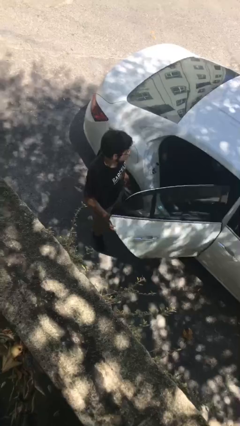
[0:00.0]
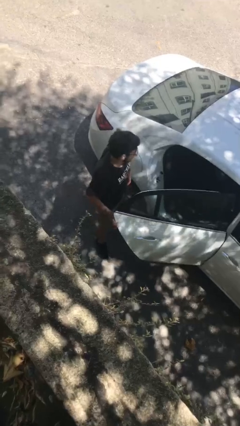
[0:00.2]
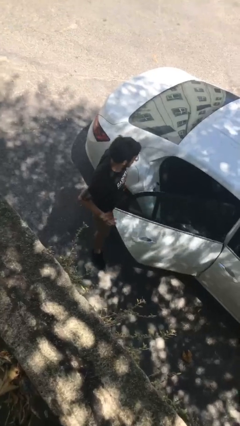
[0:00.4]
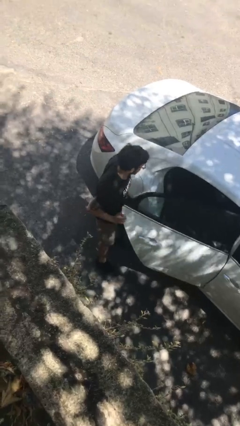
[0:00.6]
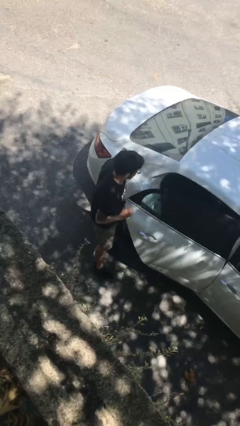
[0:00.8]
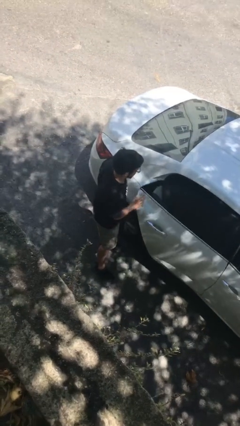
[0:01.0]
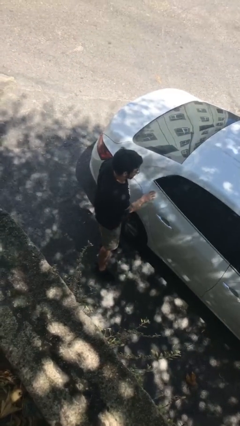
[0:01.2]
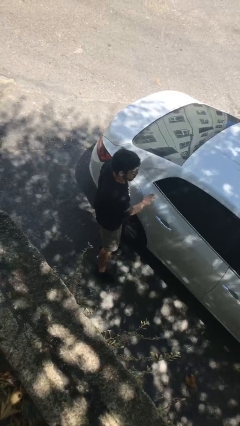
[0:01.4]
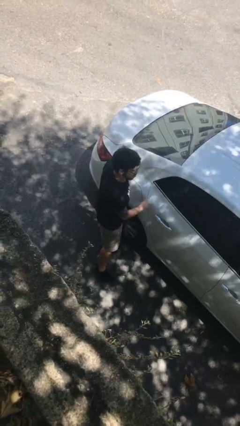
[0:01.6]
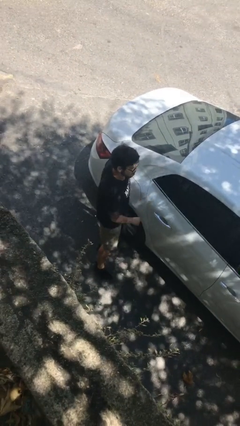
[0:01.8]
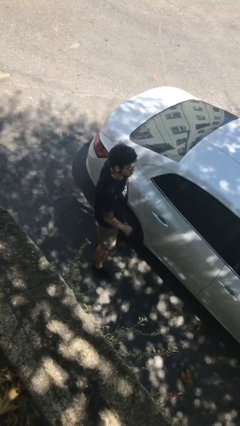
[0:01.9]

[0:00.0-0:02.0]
person closes car door

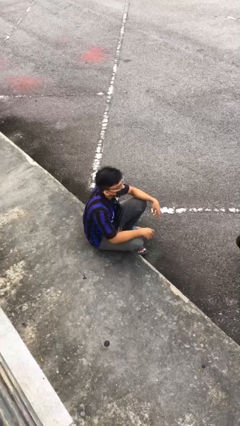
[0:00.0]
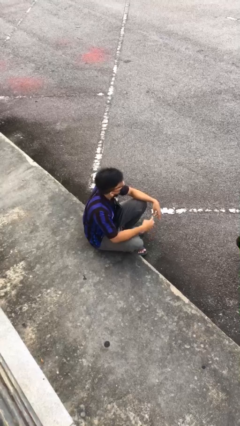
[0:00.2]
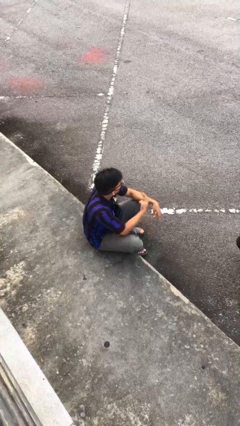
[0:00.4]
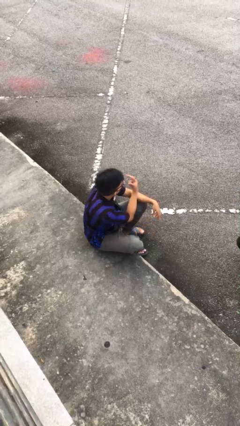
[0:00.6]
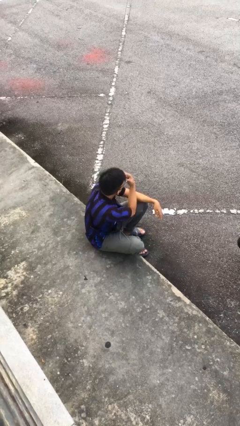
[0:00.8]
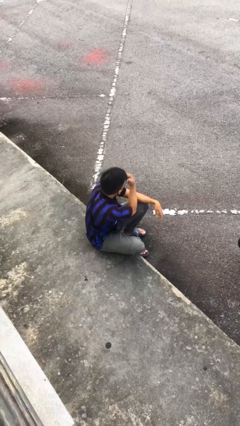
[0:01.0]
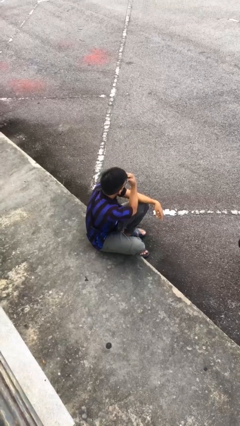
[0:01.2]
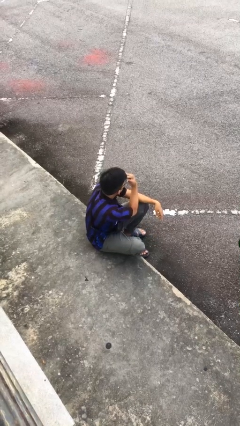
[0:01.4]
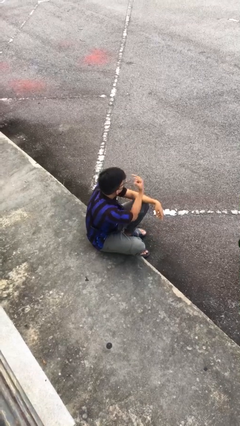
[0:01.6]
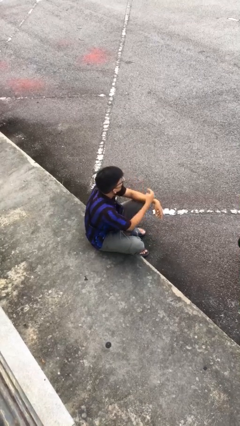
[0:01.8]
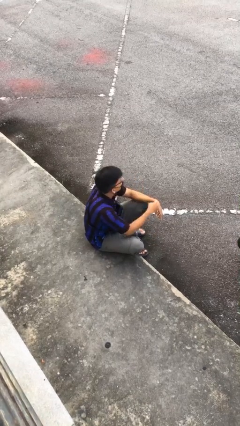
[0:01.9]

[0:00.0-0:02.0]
person gestures watch closely

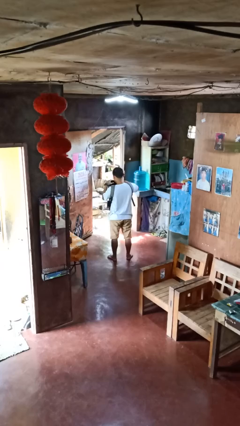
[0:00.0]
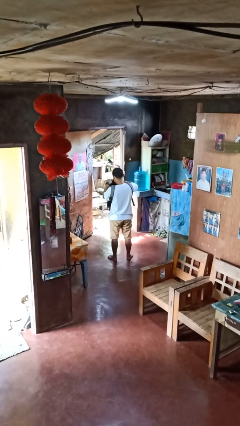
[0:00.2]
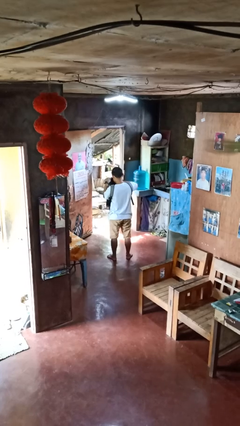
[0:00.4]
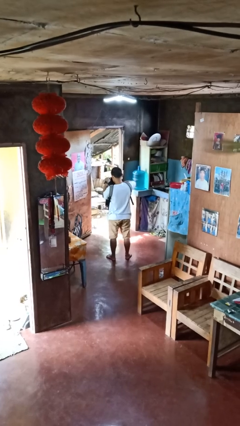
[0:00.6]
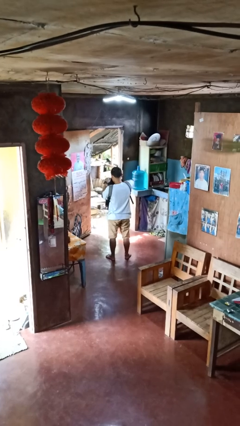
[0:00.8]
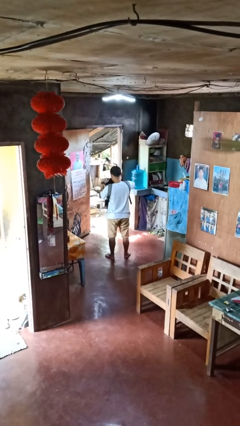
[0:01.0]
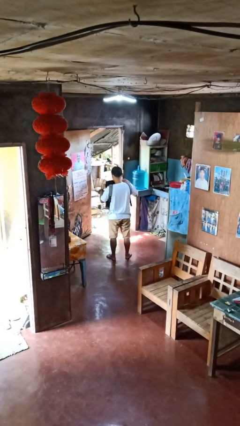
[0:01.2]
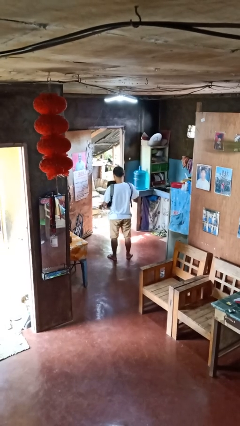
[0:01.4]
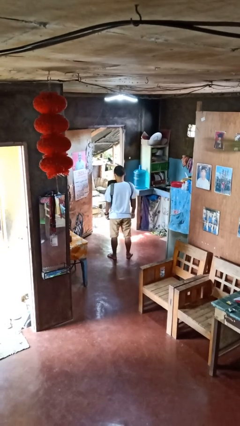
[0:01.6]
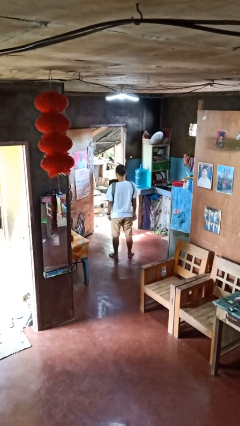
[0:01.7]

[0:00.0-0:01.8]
person puts object into backpack

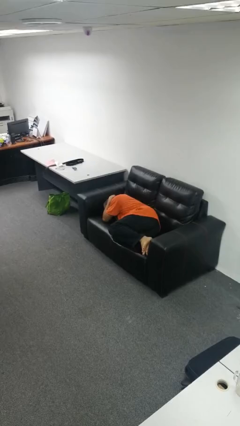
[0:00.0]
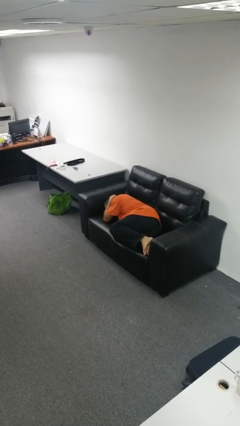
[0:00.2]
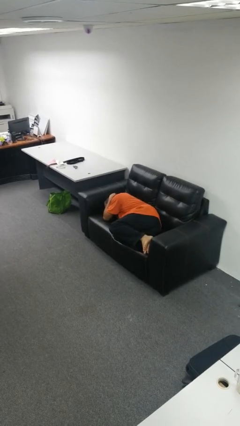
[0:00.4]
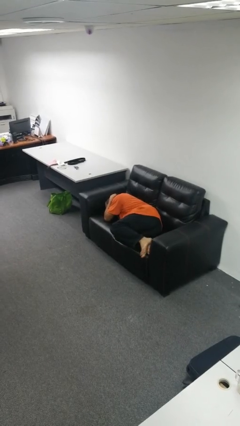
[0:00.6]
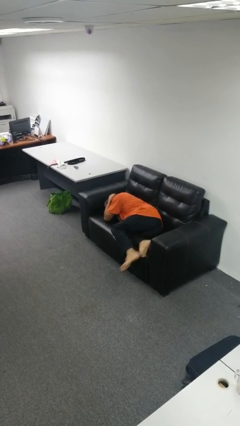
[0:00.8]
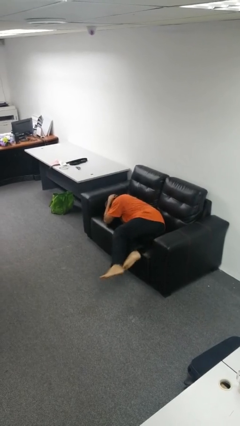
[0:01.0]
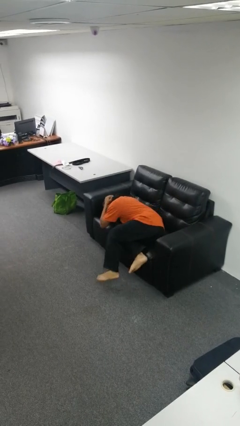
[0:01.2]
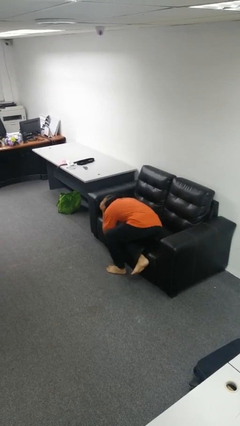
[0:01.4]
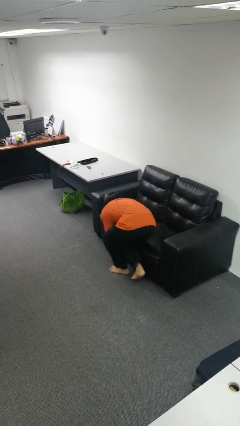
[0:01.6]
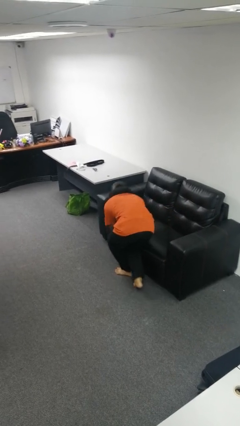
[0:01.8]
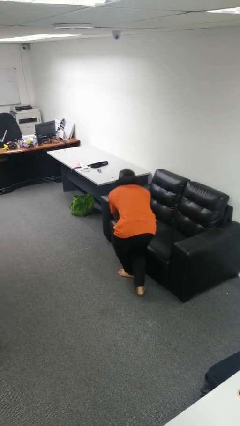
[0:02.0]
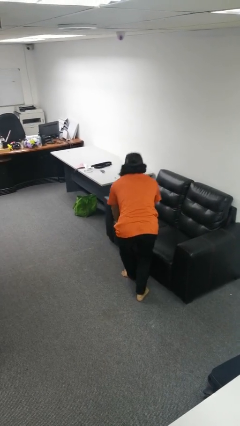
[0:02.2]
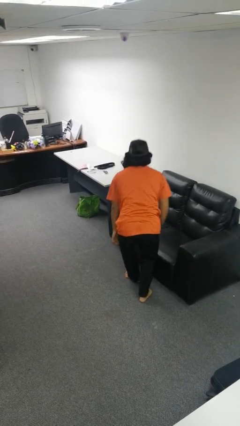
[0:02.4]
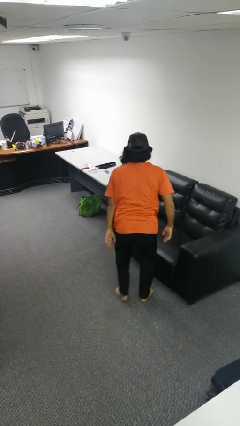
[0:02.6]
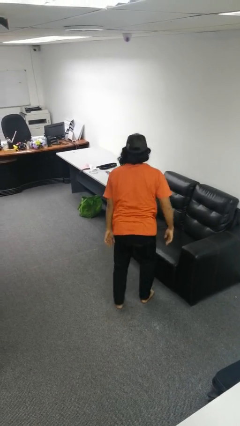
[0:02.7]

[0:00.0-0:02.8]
person stands up

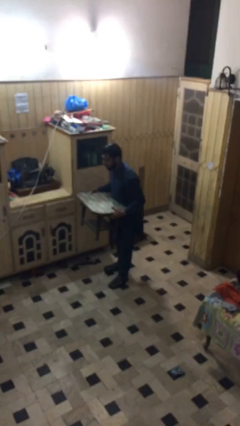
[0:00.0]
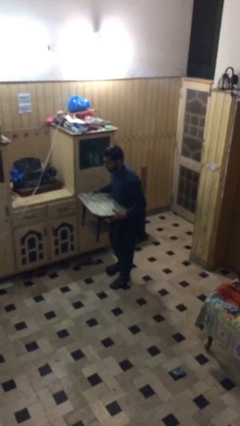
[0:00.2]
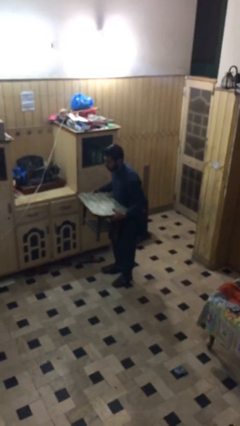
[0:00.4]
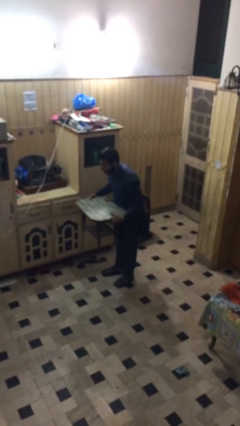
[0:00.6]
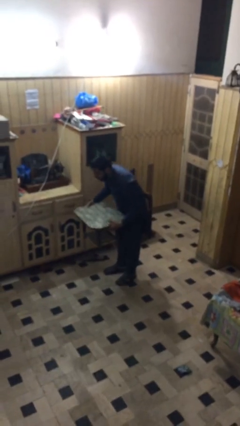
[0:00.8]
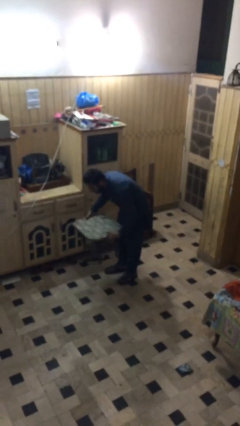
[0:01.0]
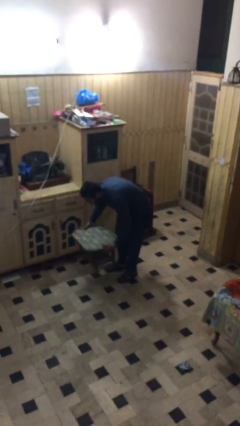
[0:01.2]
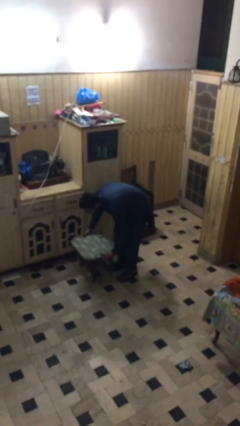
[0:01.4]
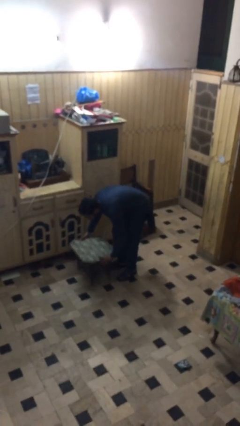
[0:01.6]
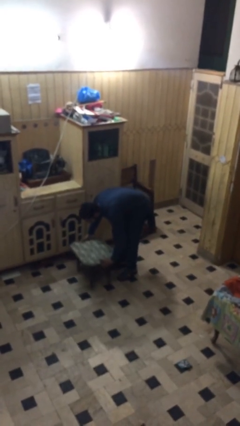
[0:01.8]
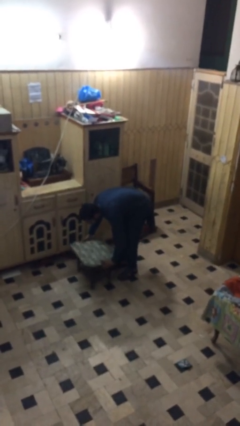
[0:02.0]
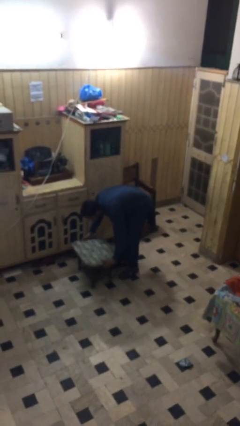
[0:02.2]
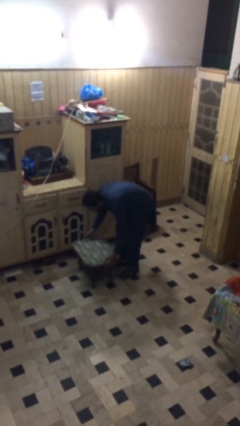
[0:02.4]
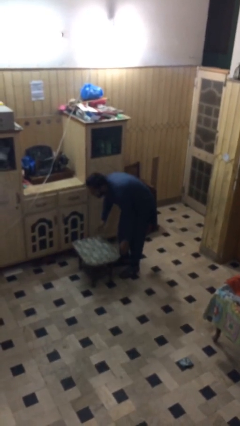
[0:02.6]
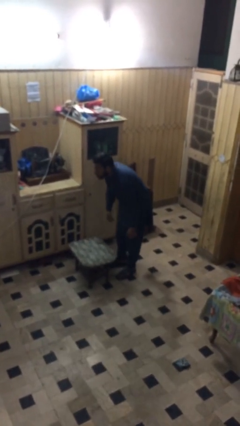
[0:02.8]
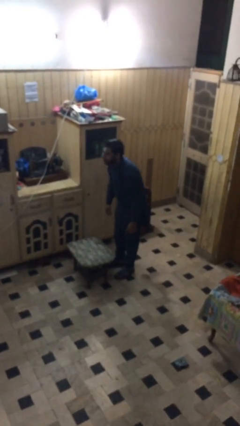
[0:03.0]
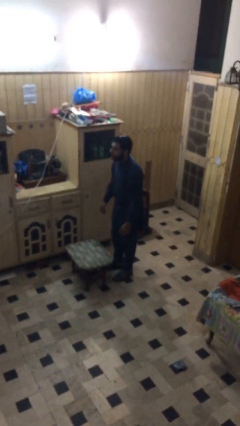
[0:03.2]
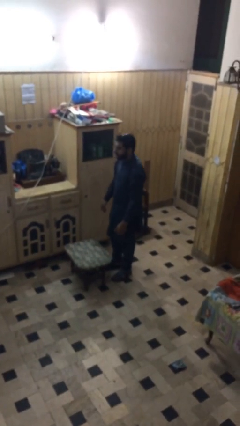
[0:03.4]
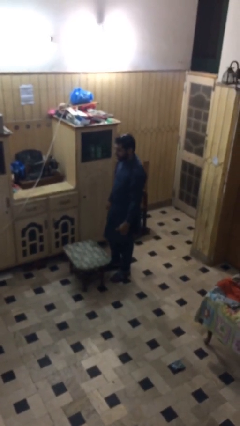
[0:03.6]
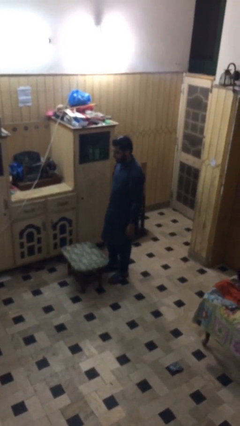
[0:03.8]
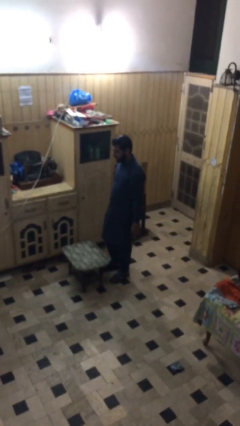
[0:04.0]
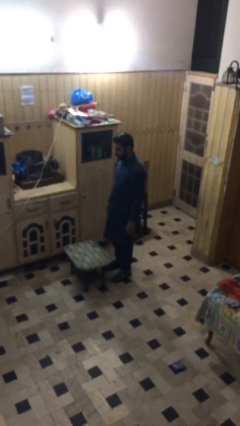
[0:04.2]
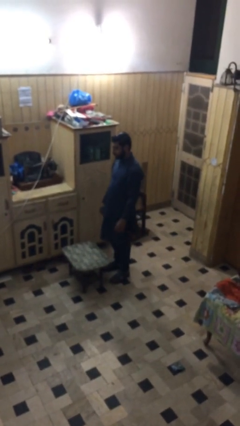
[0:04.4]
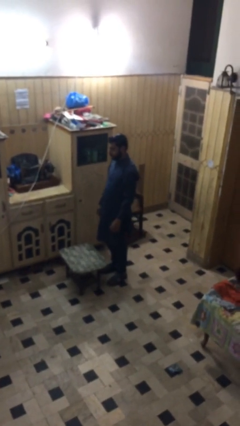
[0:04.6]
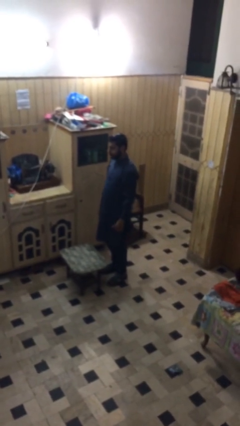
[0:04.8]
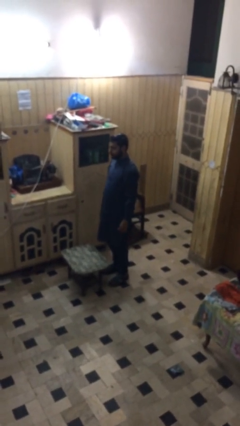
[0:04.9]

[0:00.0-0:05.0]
person puts down object on floor

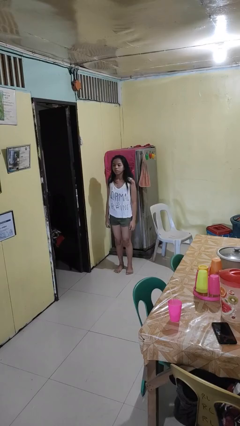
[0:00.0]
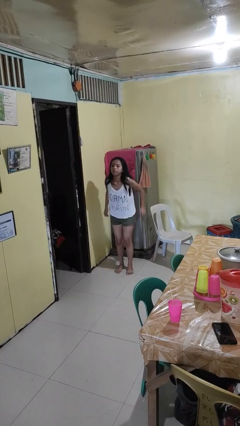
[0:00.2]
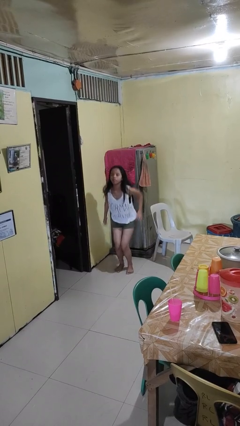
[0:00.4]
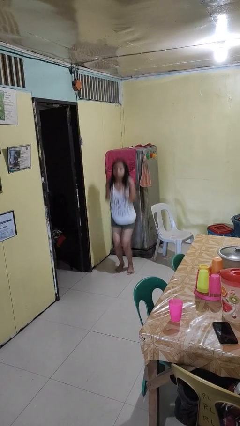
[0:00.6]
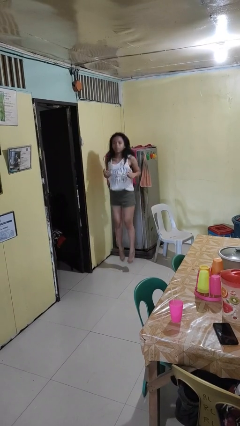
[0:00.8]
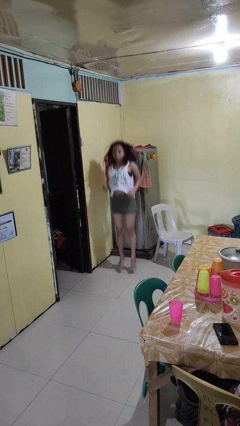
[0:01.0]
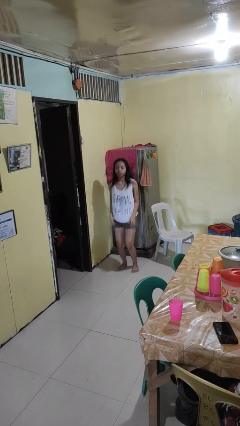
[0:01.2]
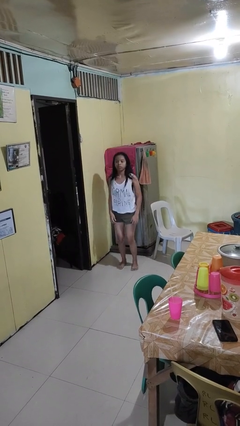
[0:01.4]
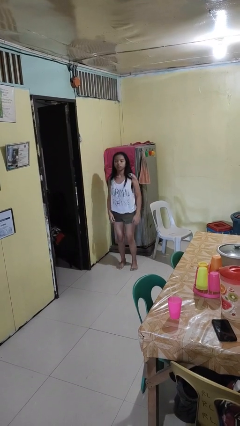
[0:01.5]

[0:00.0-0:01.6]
person jumps

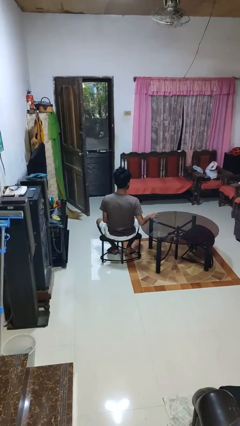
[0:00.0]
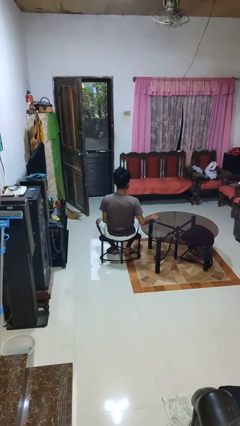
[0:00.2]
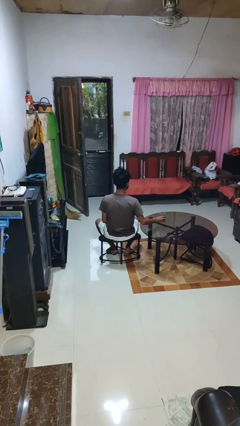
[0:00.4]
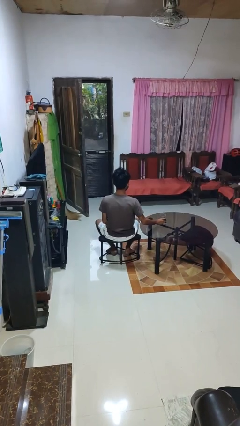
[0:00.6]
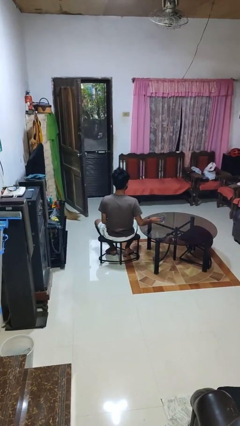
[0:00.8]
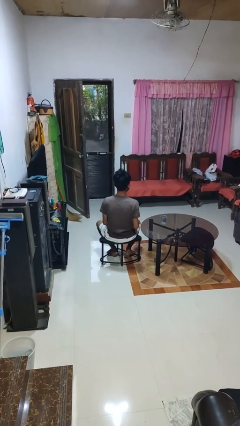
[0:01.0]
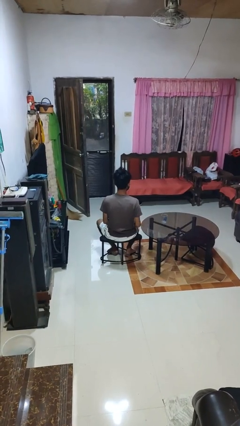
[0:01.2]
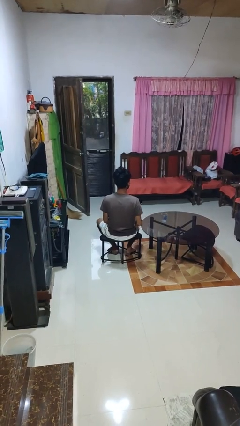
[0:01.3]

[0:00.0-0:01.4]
person sets upright glass

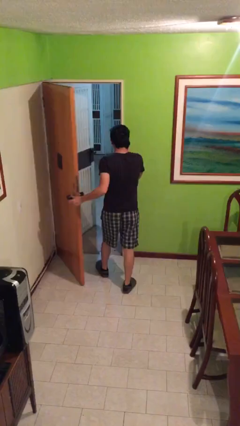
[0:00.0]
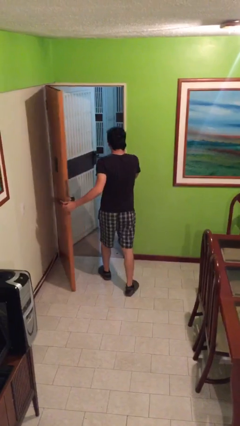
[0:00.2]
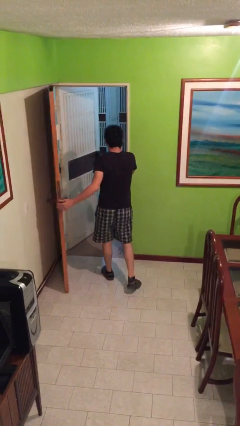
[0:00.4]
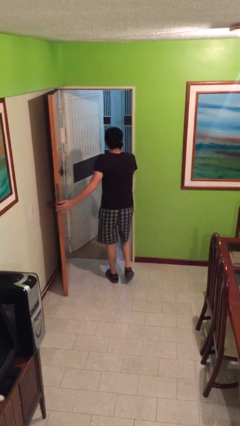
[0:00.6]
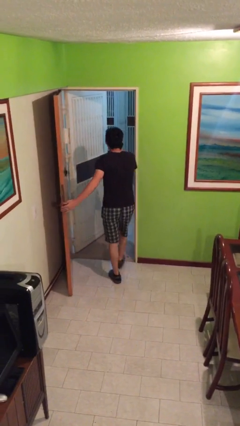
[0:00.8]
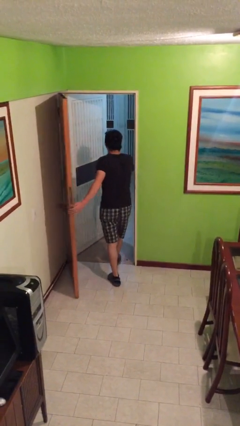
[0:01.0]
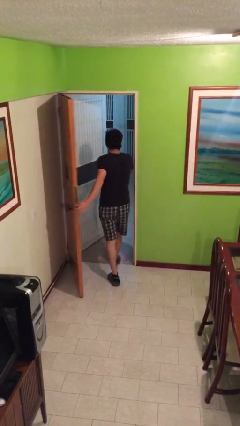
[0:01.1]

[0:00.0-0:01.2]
person exits scene through structure
